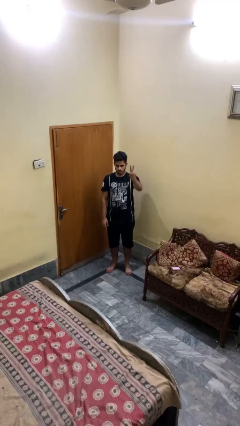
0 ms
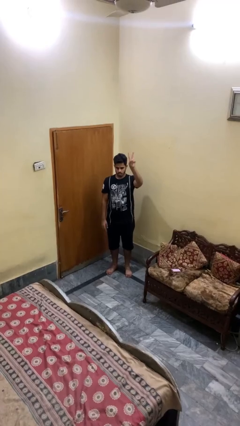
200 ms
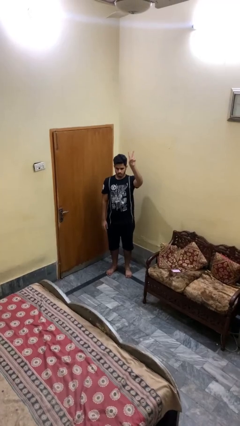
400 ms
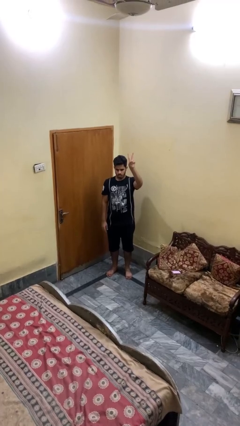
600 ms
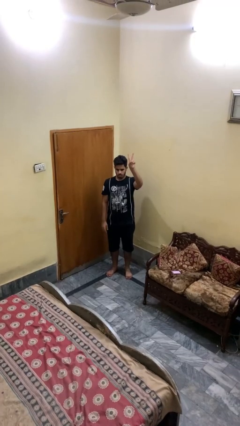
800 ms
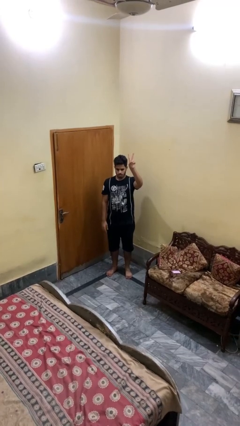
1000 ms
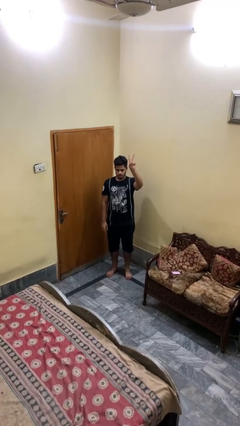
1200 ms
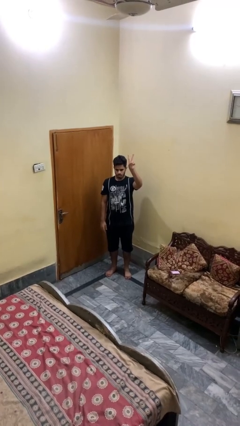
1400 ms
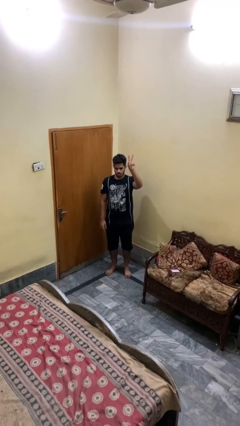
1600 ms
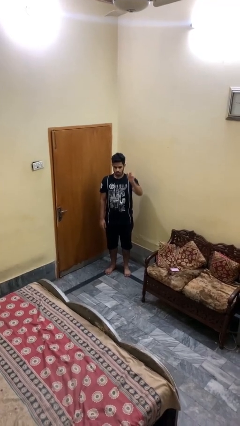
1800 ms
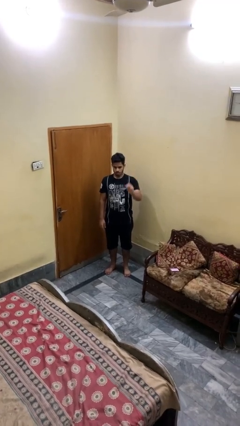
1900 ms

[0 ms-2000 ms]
person gestures peace

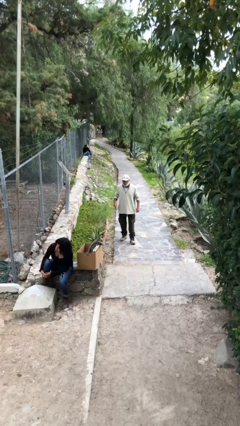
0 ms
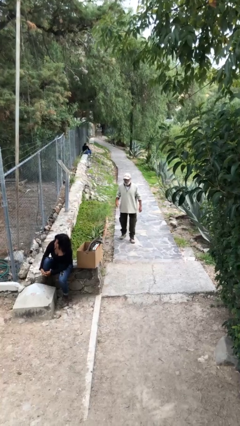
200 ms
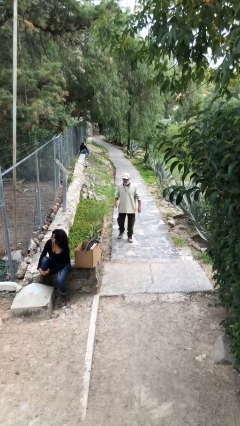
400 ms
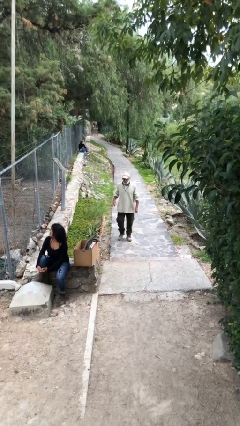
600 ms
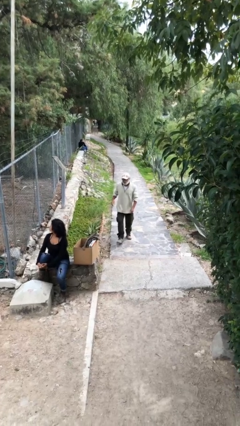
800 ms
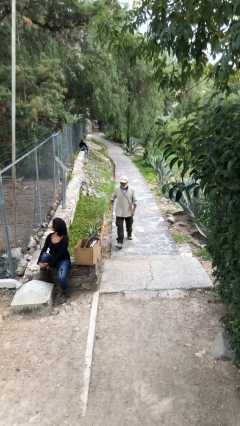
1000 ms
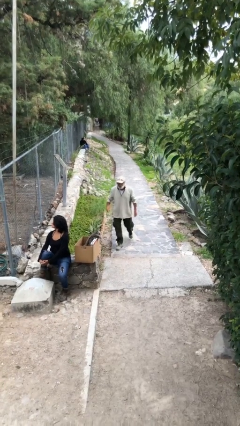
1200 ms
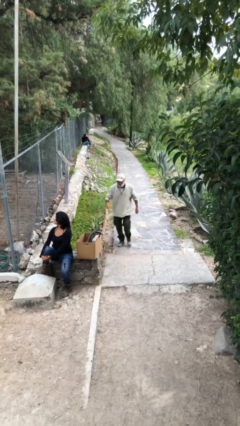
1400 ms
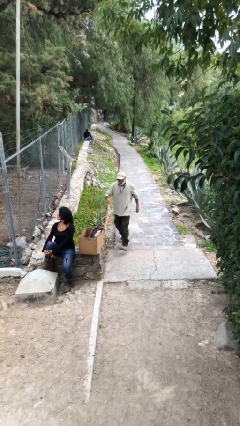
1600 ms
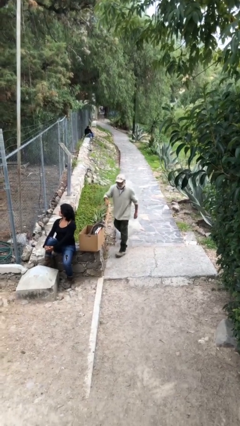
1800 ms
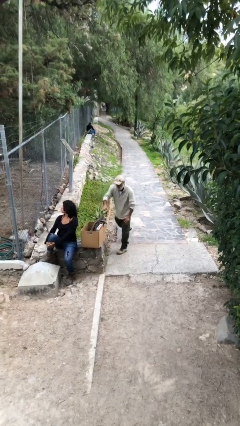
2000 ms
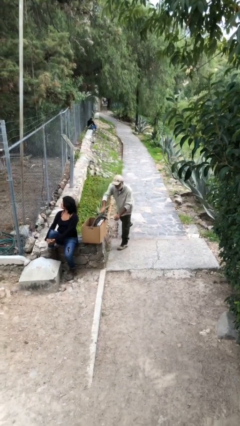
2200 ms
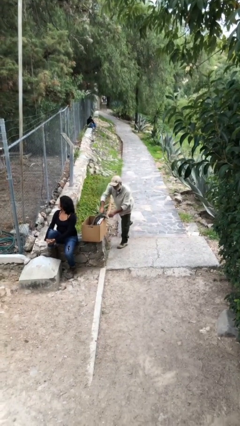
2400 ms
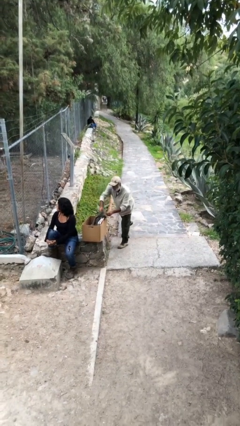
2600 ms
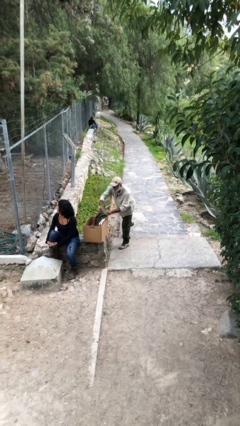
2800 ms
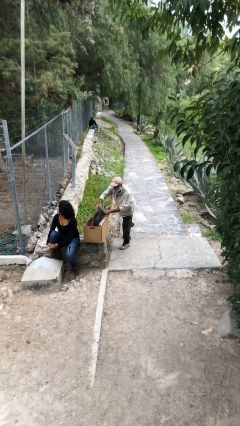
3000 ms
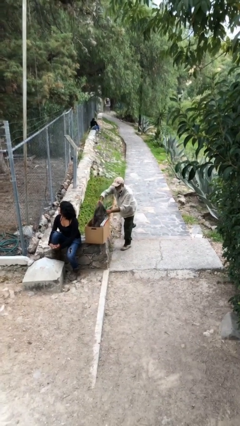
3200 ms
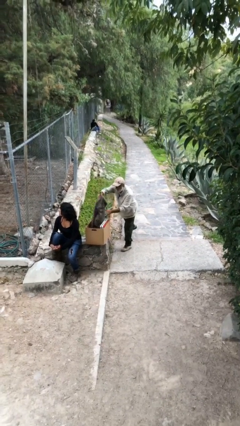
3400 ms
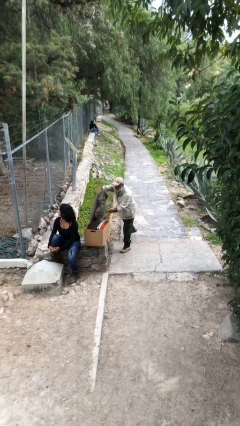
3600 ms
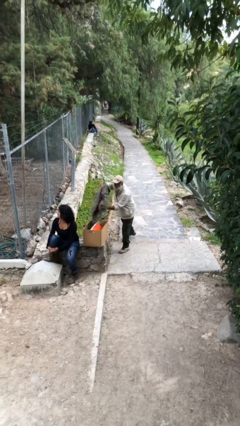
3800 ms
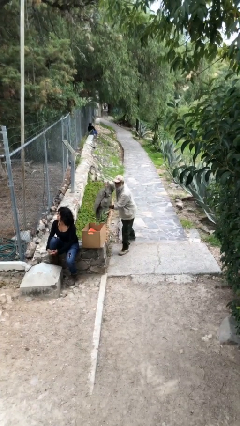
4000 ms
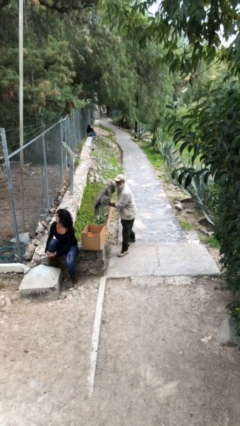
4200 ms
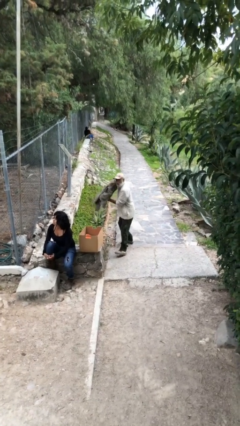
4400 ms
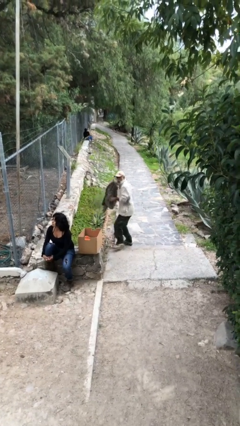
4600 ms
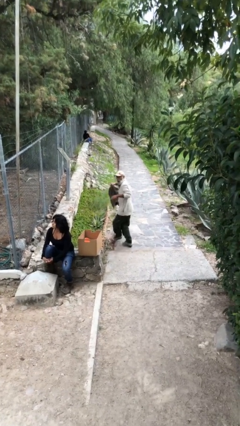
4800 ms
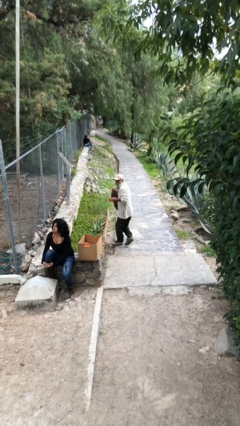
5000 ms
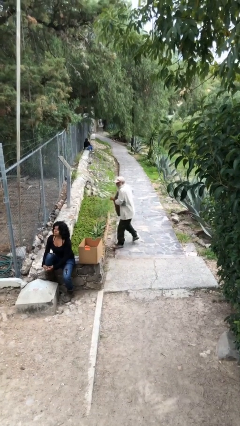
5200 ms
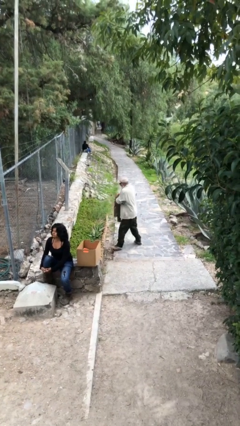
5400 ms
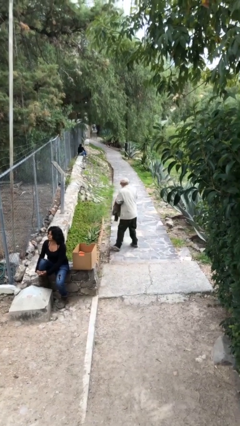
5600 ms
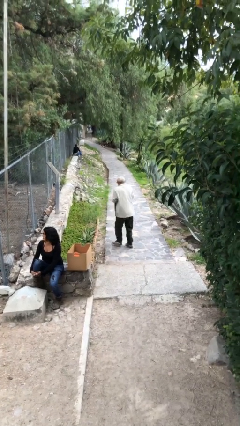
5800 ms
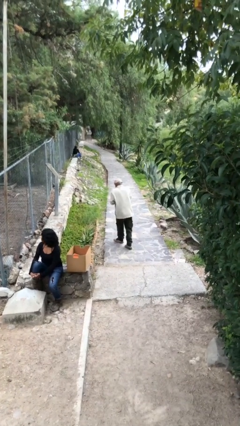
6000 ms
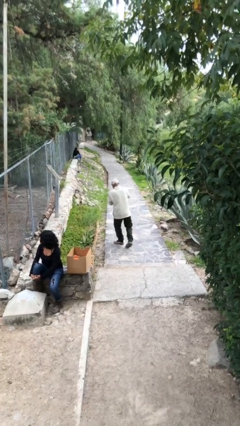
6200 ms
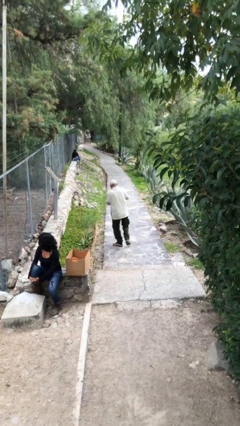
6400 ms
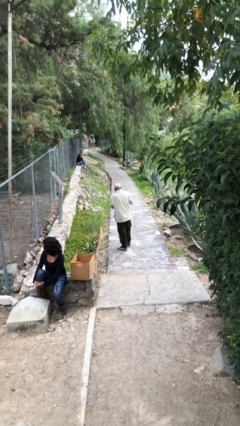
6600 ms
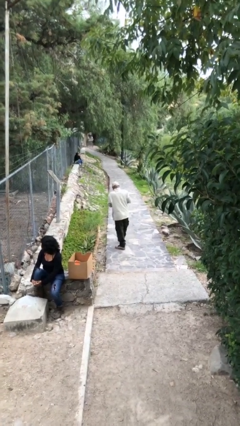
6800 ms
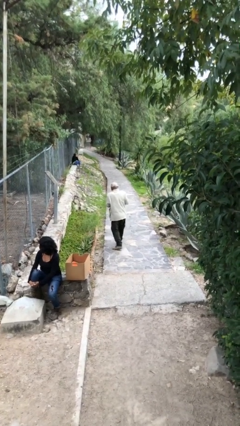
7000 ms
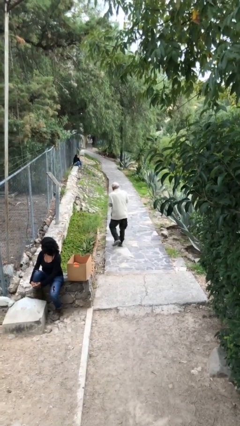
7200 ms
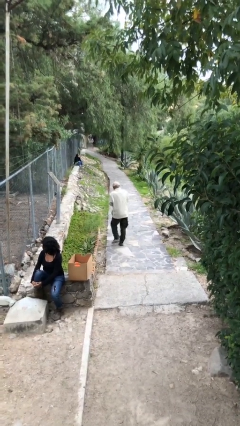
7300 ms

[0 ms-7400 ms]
person steals object from person

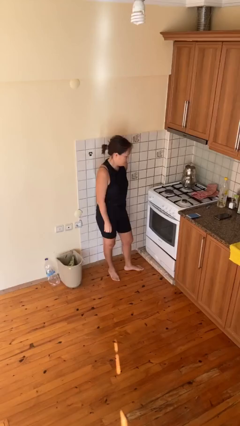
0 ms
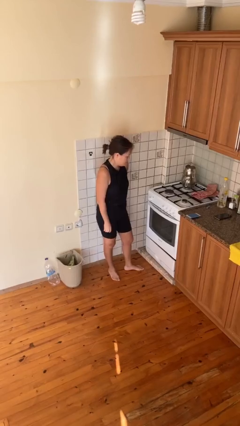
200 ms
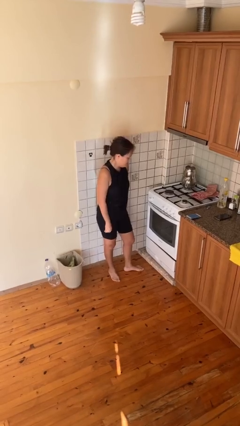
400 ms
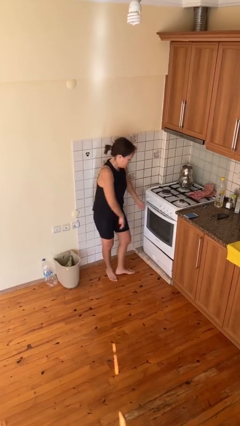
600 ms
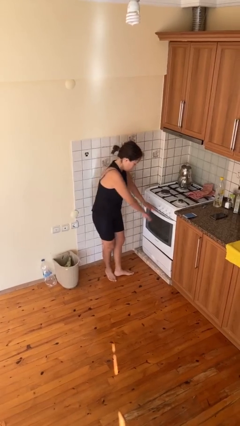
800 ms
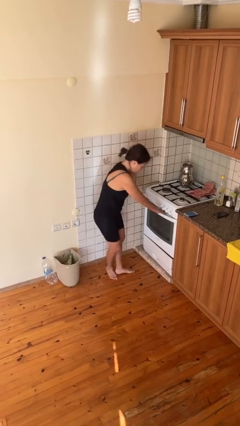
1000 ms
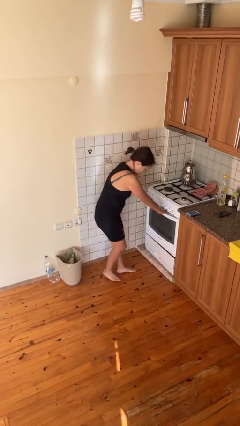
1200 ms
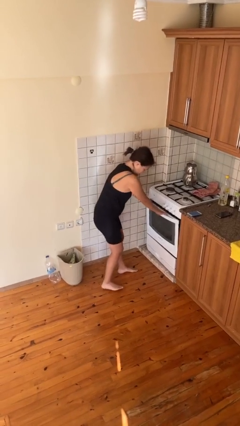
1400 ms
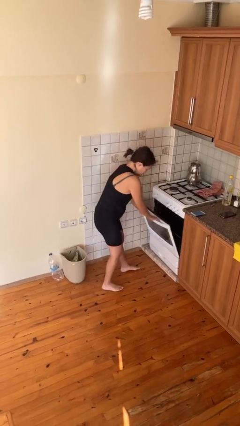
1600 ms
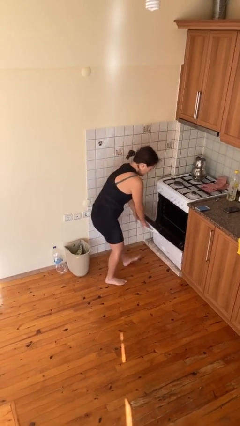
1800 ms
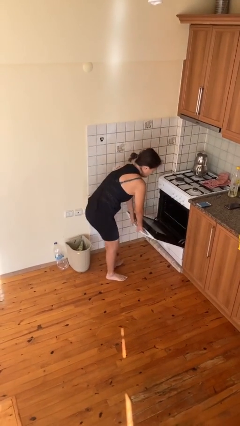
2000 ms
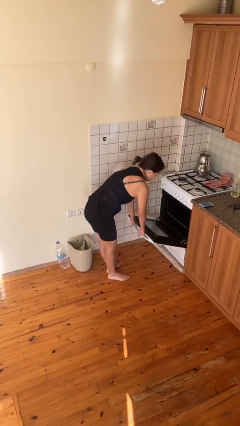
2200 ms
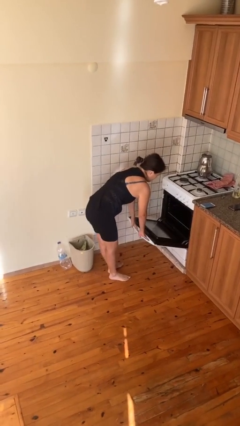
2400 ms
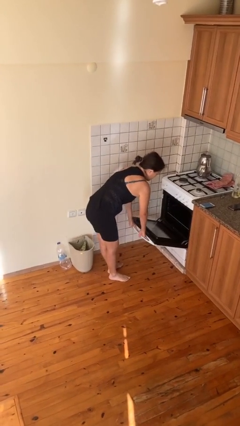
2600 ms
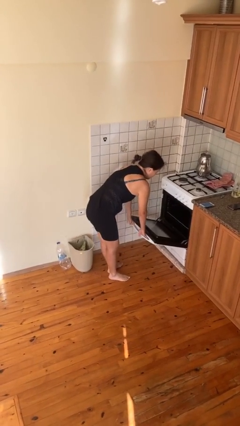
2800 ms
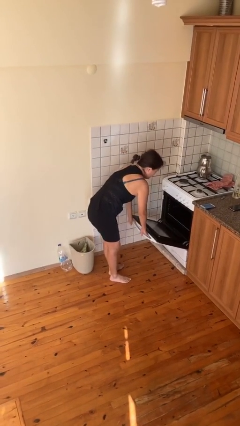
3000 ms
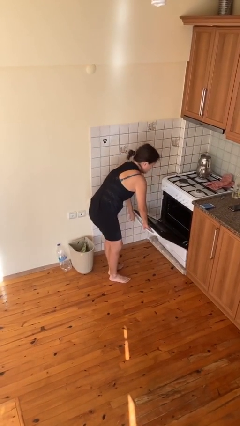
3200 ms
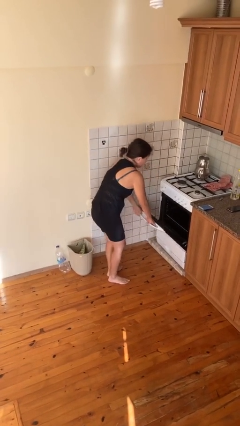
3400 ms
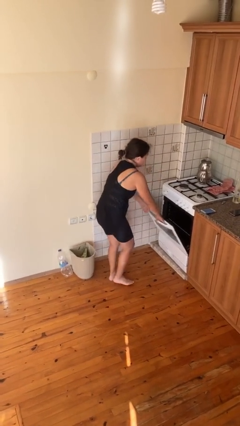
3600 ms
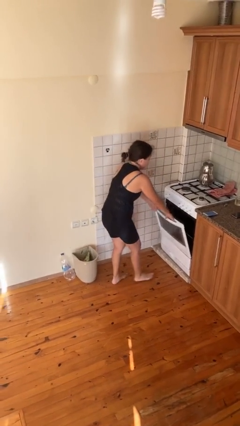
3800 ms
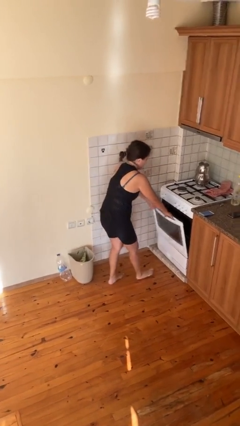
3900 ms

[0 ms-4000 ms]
person opens oven door

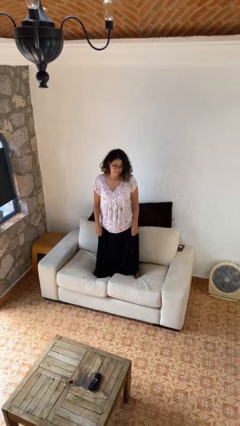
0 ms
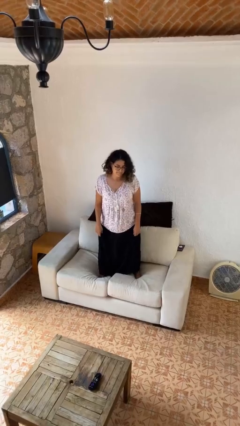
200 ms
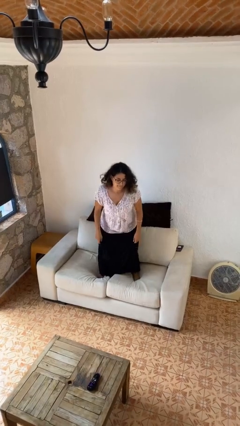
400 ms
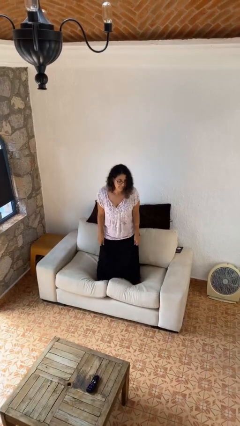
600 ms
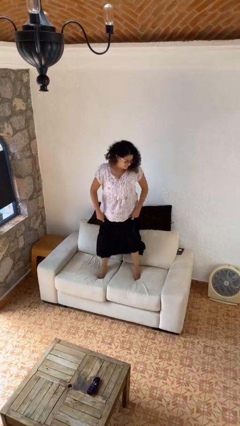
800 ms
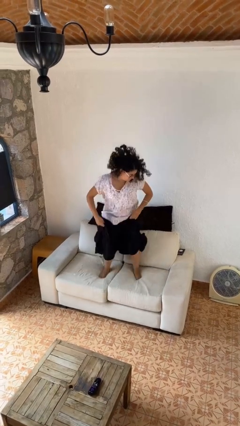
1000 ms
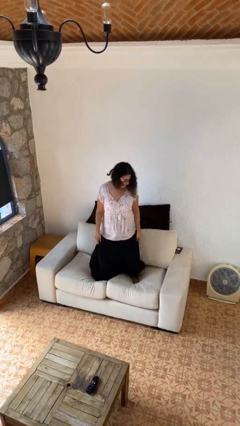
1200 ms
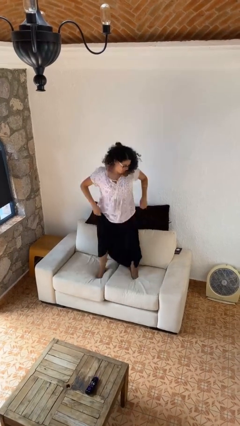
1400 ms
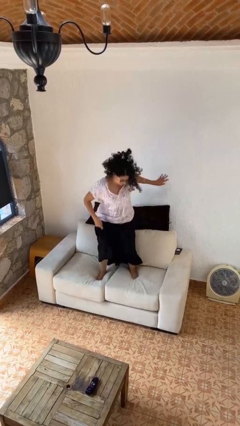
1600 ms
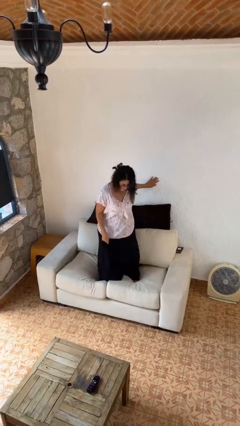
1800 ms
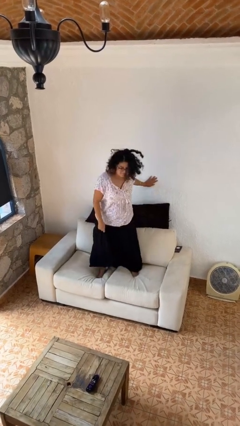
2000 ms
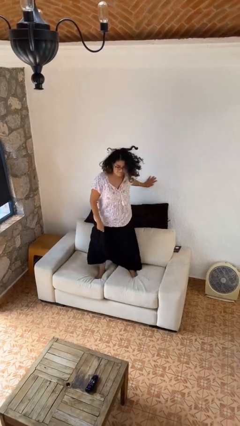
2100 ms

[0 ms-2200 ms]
person jumps on couch

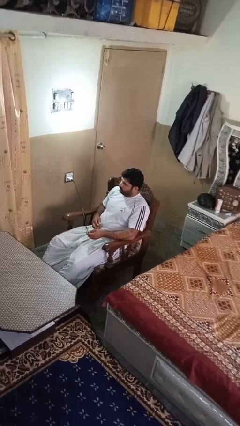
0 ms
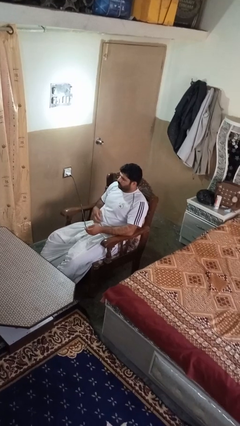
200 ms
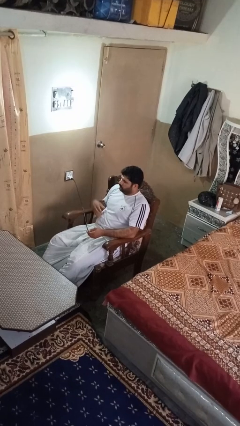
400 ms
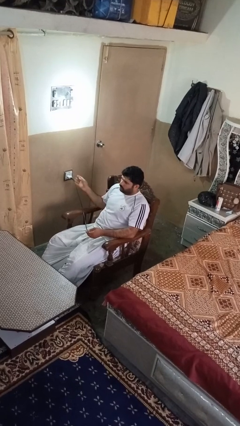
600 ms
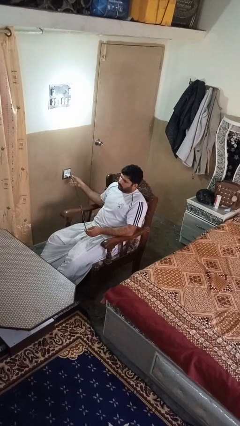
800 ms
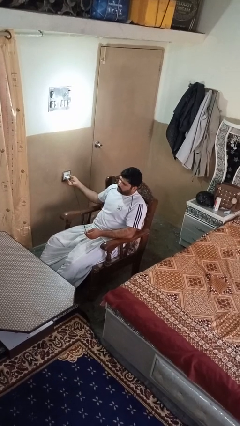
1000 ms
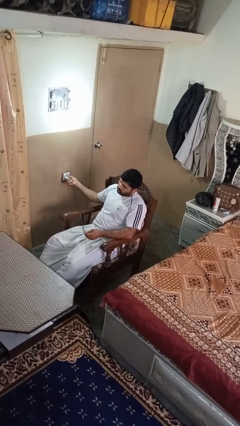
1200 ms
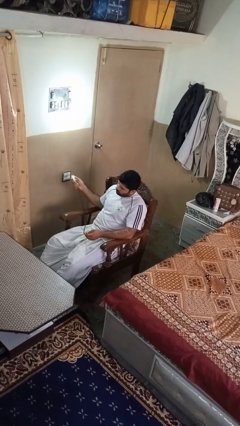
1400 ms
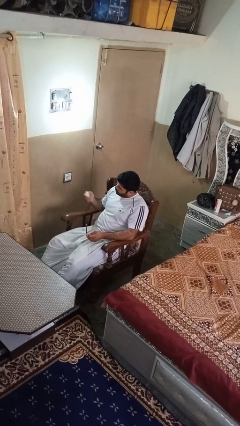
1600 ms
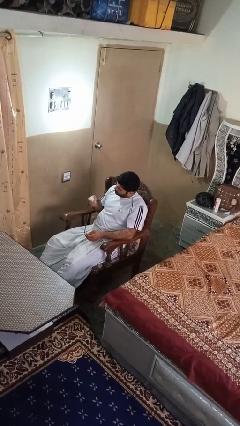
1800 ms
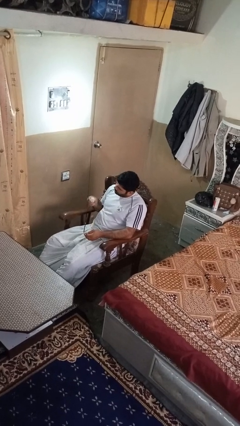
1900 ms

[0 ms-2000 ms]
person unplugs from electrical socket

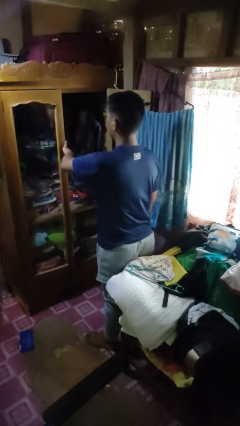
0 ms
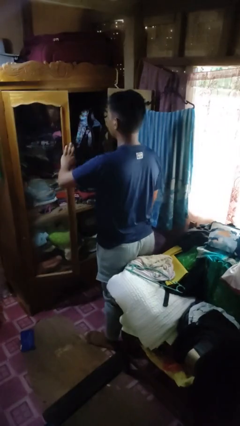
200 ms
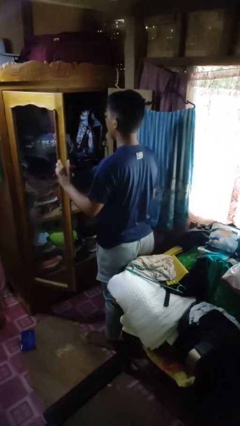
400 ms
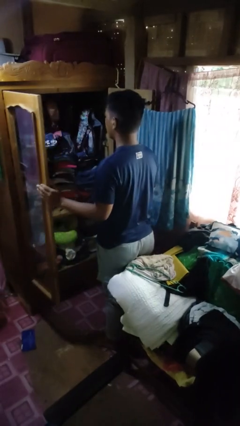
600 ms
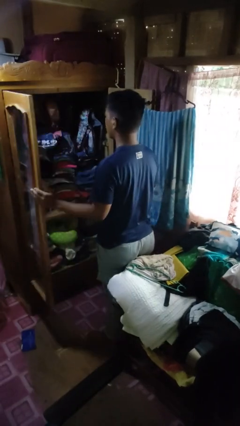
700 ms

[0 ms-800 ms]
person opens closet door
